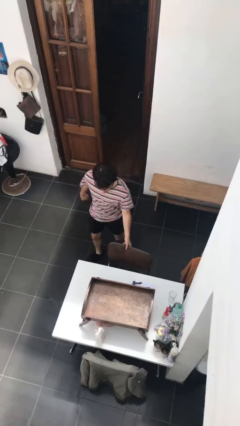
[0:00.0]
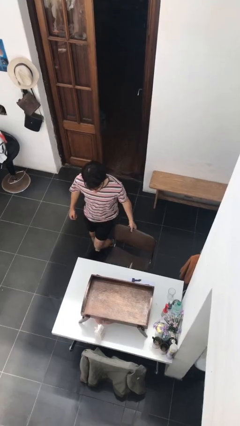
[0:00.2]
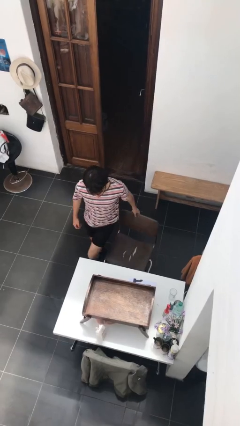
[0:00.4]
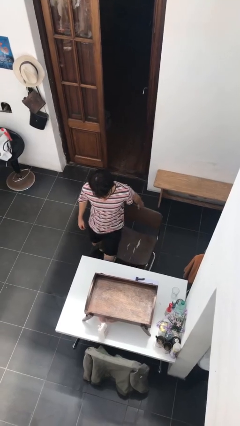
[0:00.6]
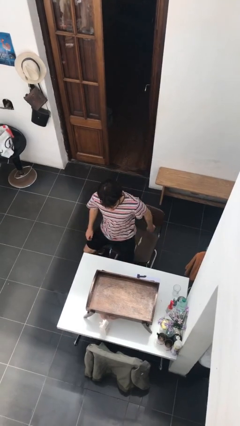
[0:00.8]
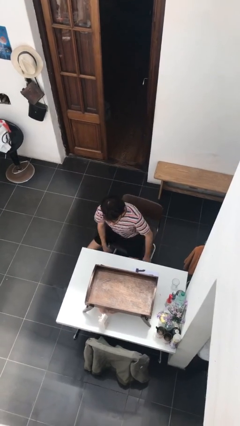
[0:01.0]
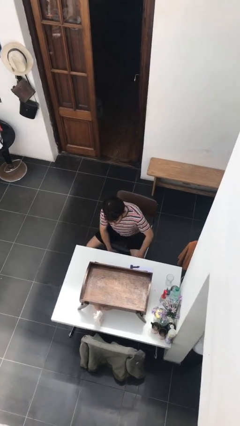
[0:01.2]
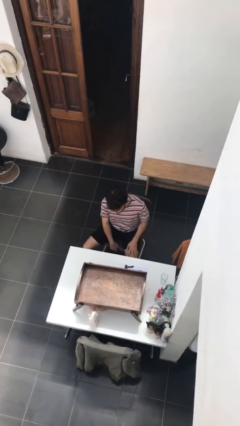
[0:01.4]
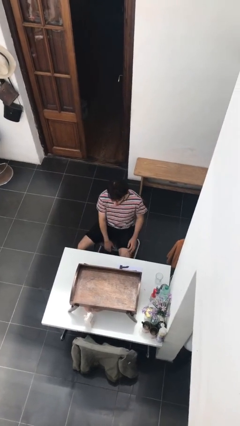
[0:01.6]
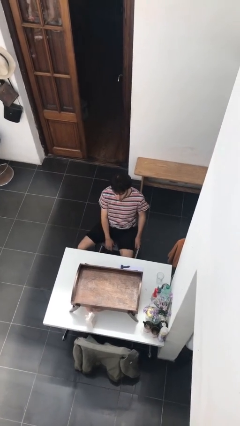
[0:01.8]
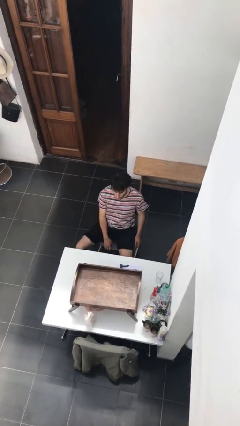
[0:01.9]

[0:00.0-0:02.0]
person sits down

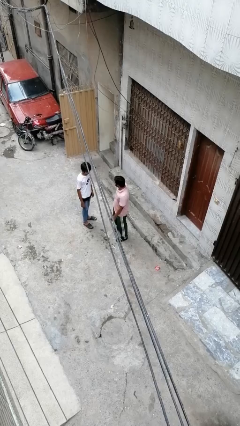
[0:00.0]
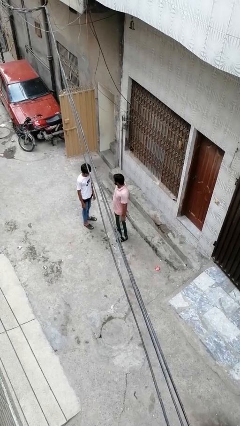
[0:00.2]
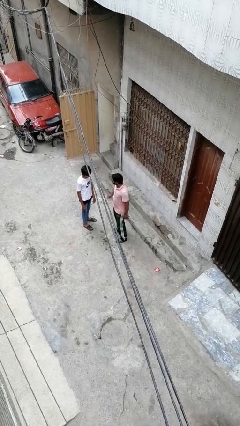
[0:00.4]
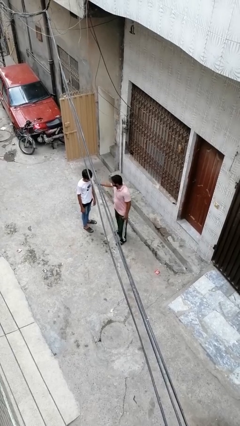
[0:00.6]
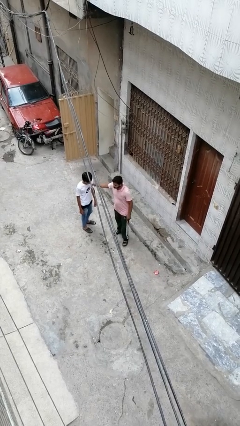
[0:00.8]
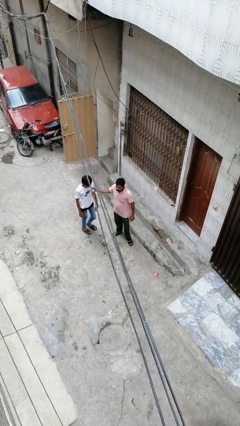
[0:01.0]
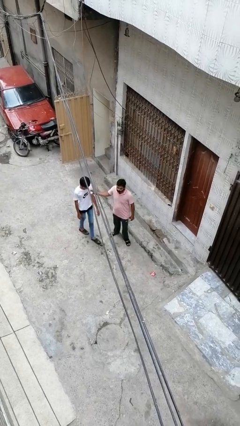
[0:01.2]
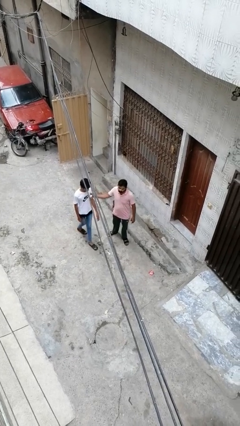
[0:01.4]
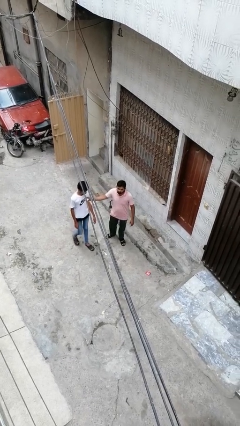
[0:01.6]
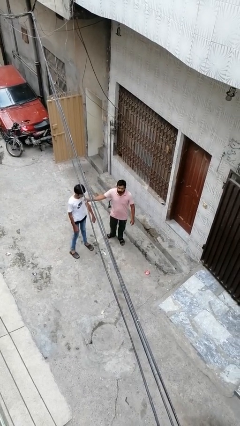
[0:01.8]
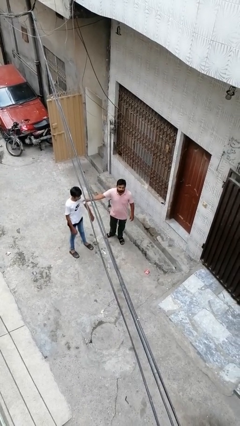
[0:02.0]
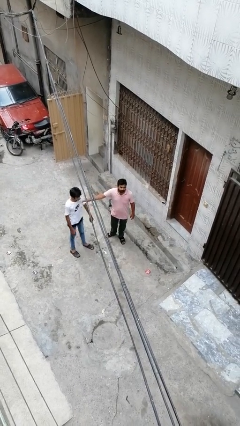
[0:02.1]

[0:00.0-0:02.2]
person grabs person by bicep

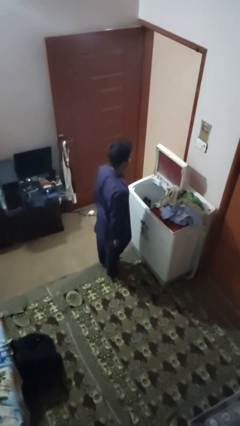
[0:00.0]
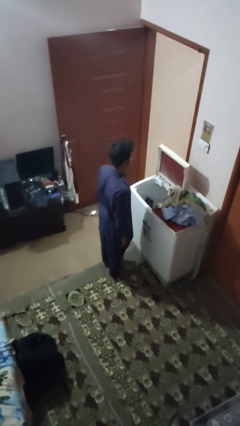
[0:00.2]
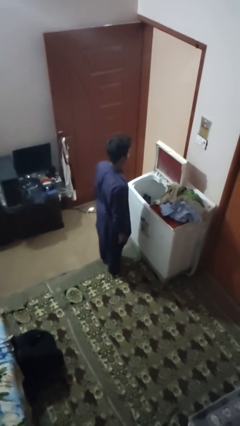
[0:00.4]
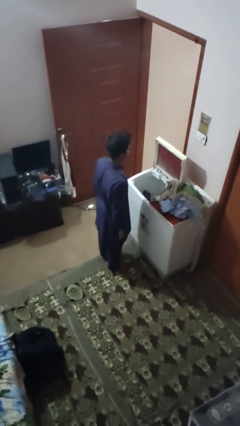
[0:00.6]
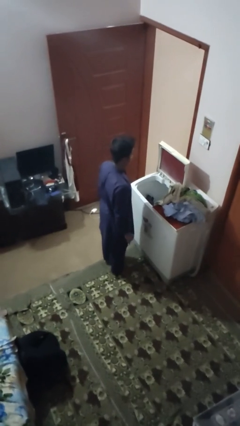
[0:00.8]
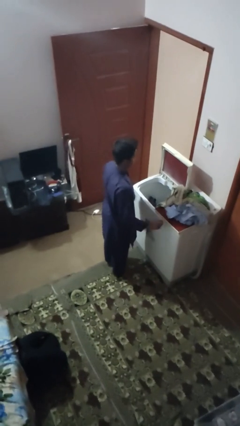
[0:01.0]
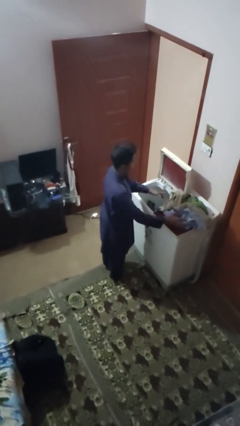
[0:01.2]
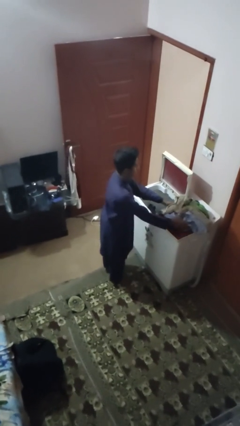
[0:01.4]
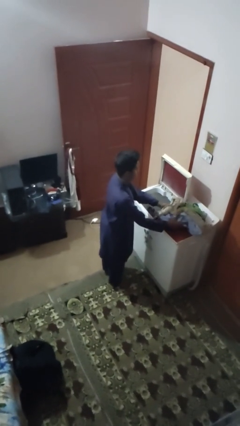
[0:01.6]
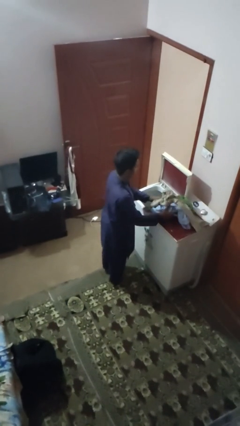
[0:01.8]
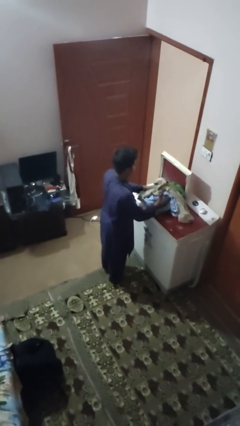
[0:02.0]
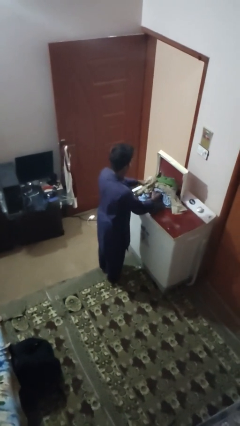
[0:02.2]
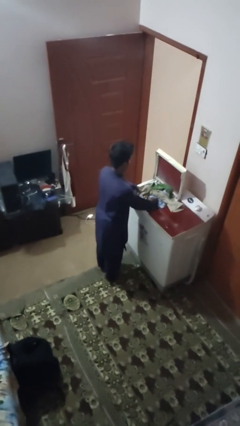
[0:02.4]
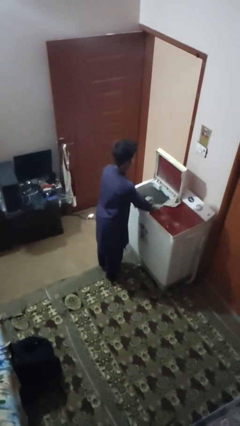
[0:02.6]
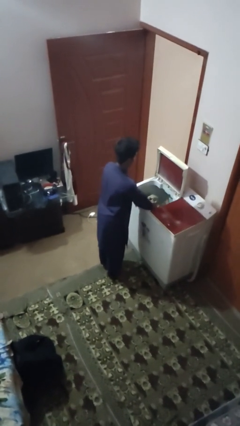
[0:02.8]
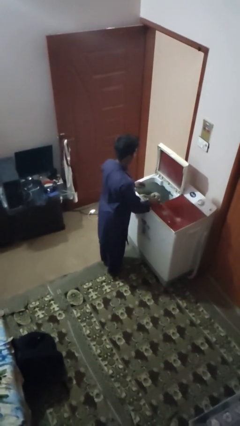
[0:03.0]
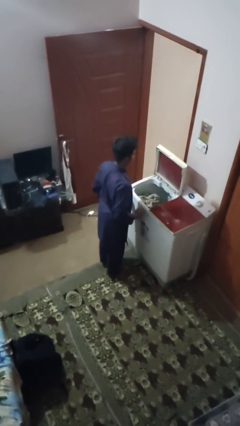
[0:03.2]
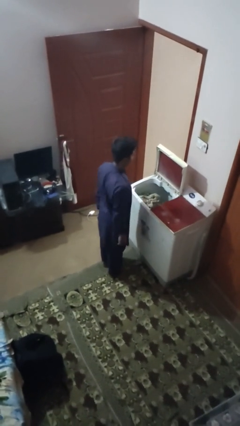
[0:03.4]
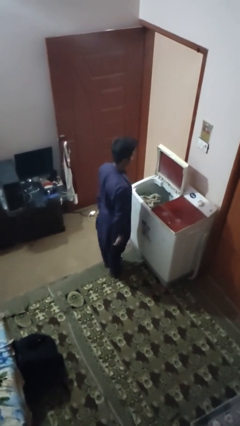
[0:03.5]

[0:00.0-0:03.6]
person loads clotheswasher

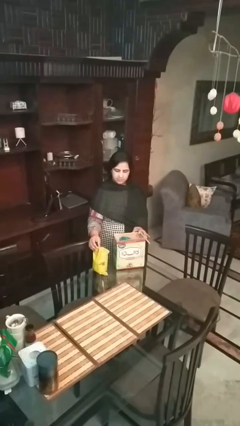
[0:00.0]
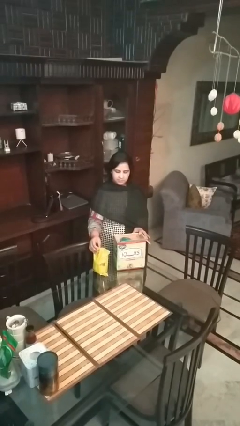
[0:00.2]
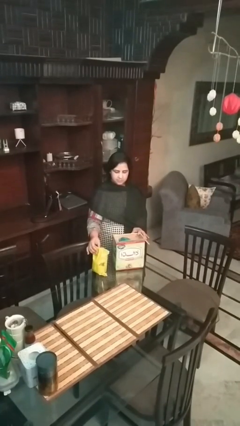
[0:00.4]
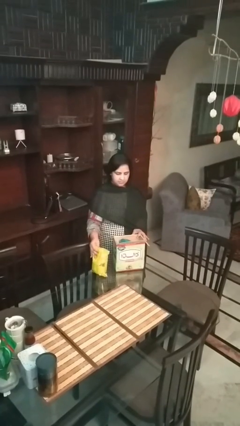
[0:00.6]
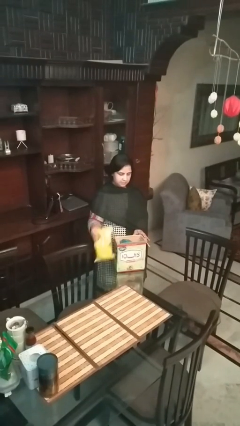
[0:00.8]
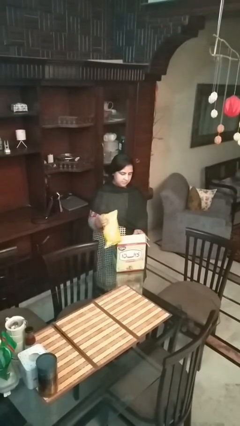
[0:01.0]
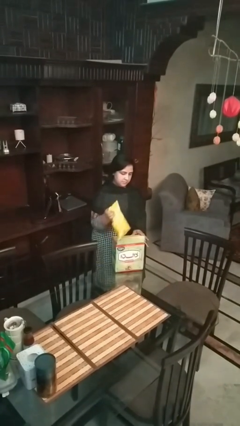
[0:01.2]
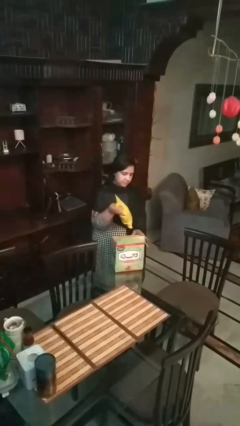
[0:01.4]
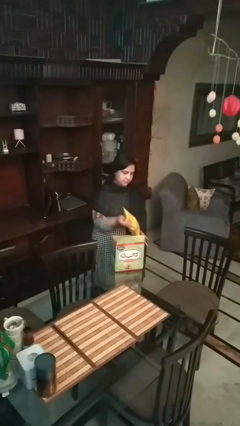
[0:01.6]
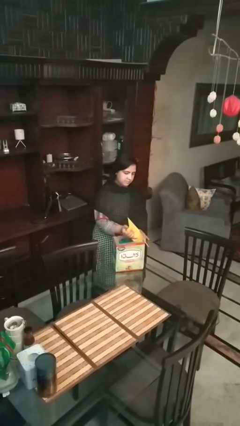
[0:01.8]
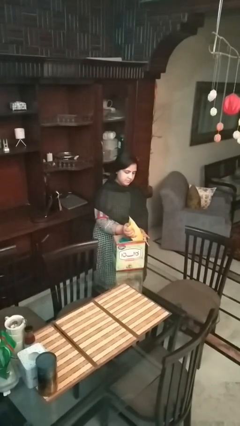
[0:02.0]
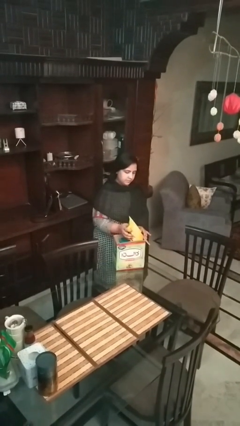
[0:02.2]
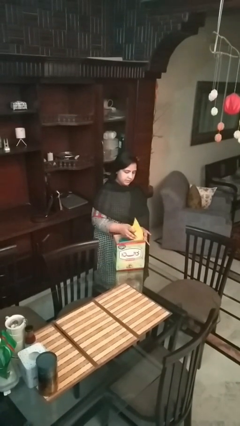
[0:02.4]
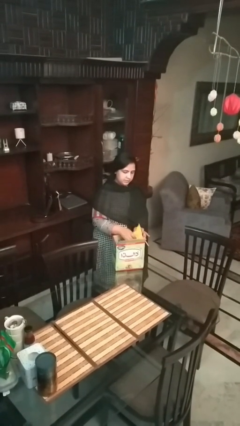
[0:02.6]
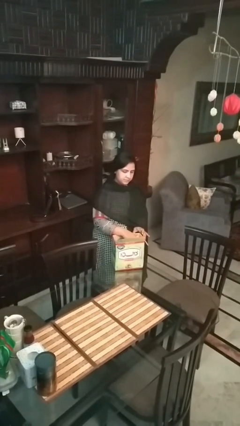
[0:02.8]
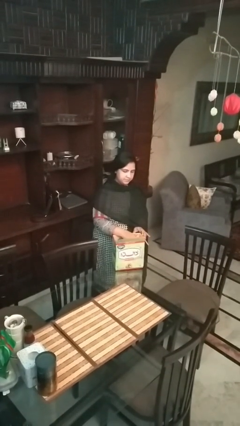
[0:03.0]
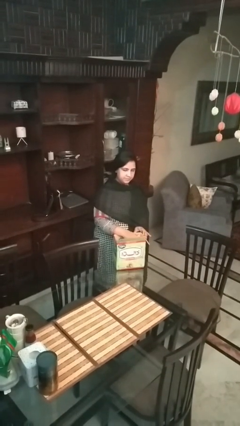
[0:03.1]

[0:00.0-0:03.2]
person puts object into box

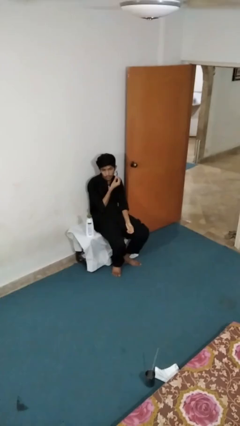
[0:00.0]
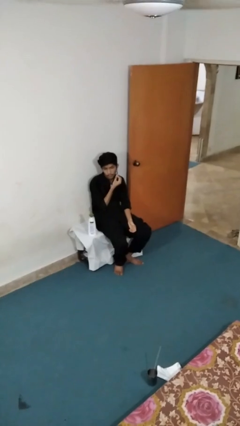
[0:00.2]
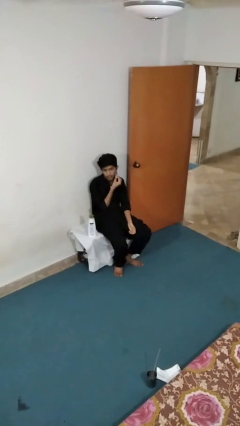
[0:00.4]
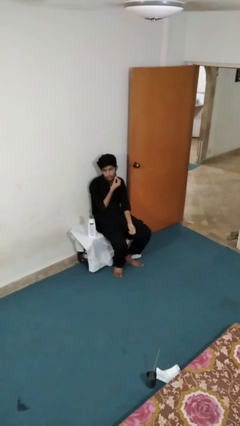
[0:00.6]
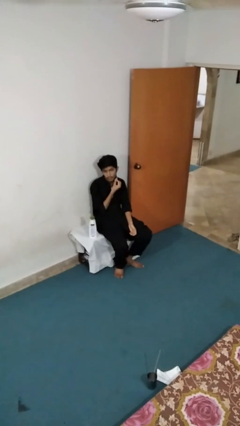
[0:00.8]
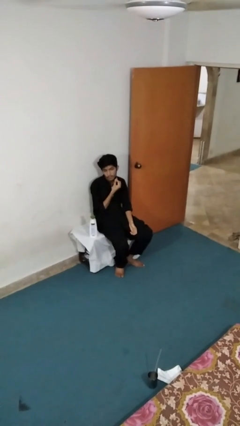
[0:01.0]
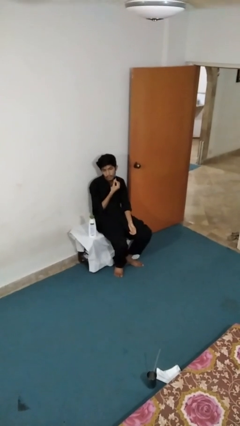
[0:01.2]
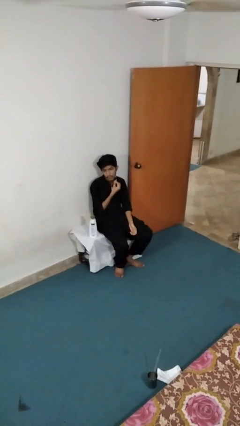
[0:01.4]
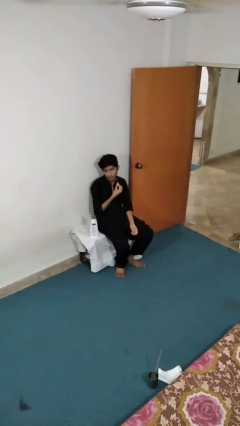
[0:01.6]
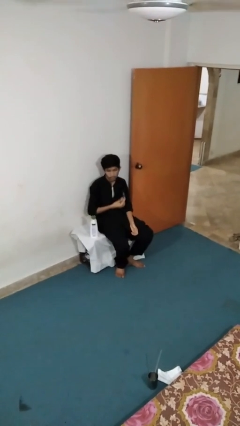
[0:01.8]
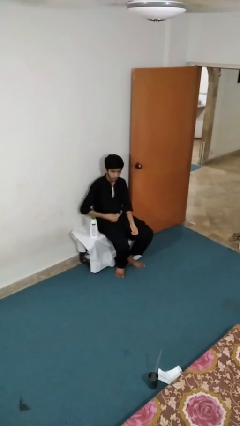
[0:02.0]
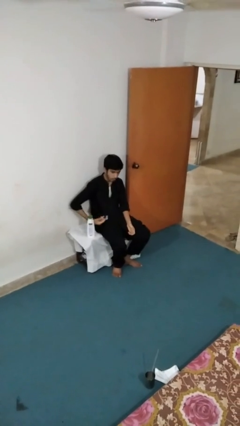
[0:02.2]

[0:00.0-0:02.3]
person shaves face

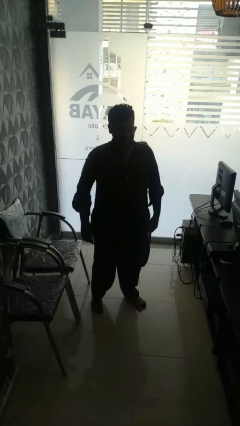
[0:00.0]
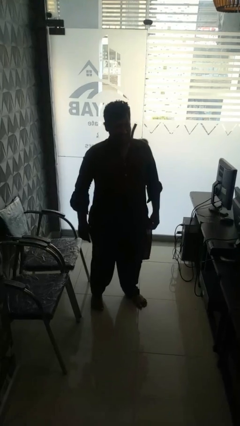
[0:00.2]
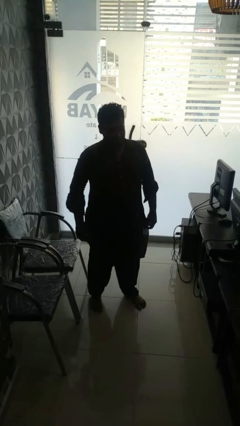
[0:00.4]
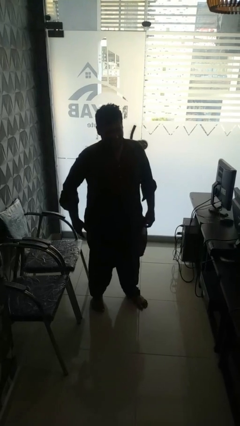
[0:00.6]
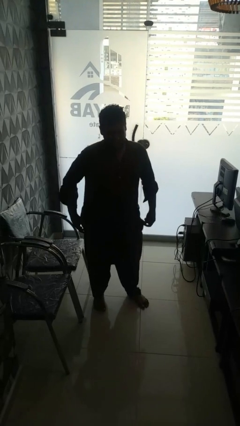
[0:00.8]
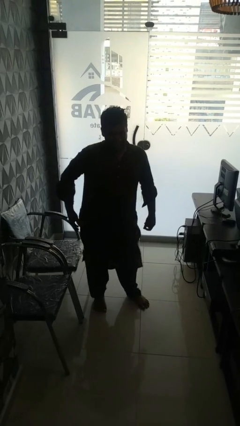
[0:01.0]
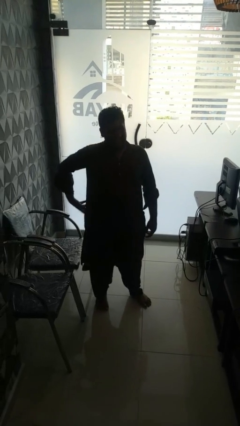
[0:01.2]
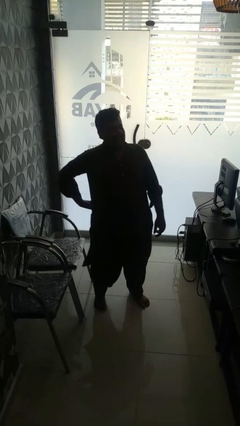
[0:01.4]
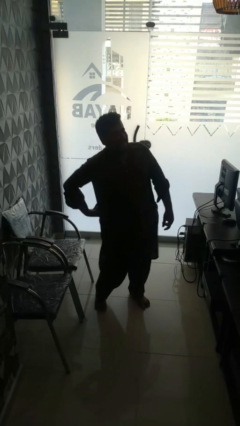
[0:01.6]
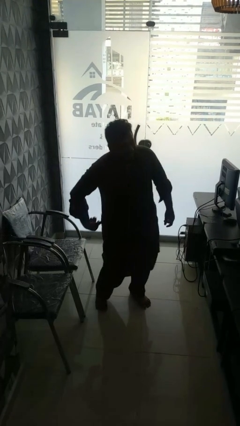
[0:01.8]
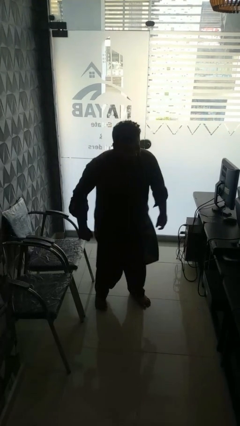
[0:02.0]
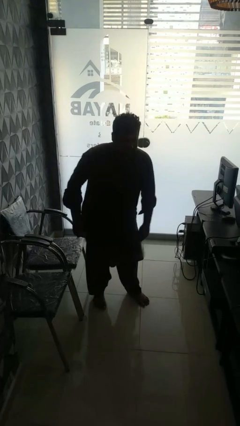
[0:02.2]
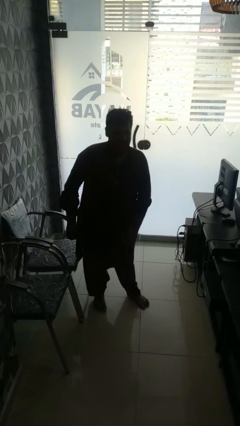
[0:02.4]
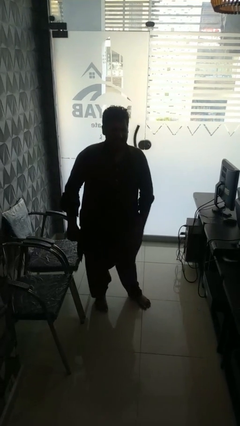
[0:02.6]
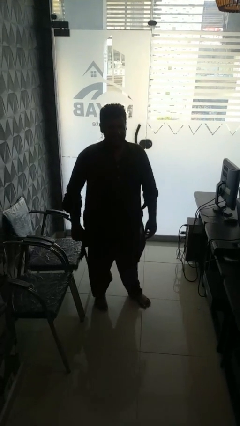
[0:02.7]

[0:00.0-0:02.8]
person wiggles hips

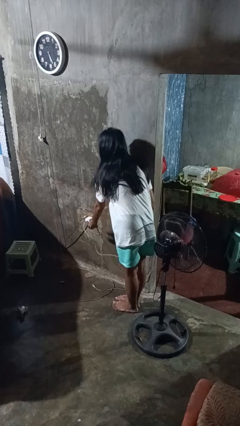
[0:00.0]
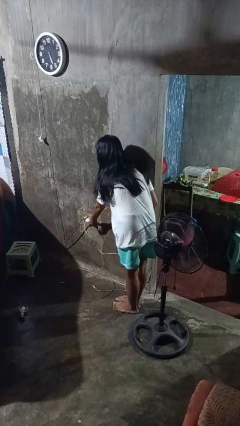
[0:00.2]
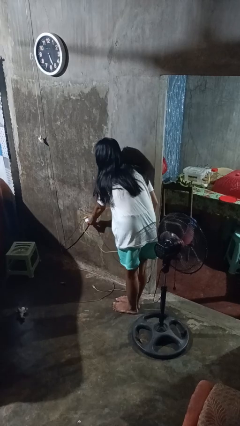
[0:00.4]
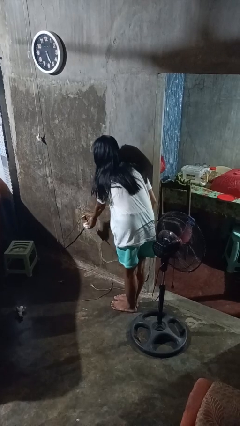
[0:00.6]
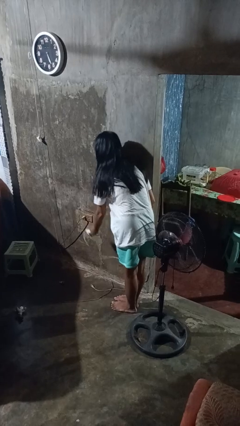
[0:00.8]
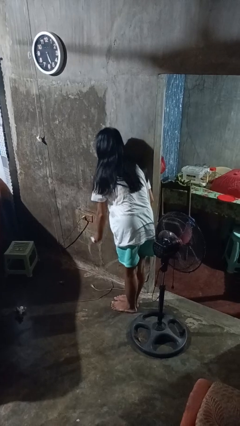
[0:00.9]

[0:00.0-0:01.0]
person unplugs from electrical socket
